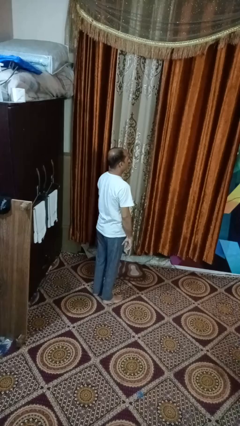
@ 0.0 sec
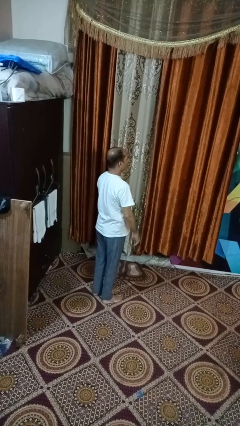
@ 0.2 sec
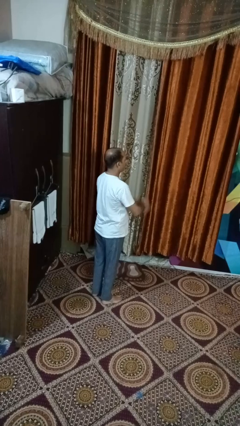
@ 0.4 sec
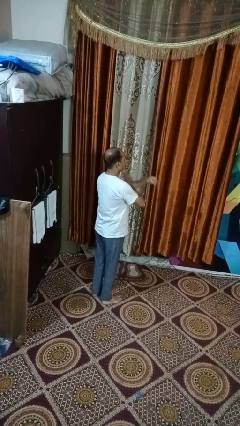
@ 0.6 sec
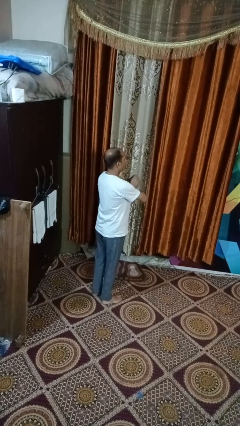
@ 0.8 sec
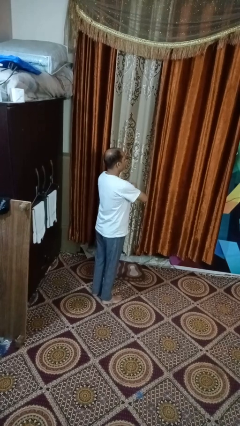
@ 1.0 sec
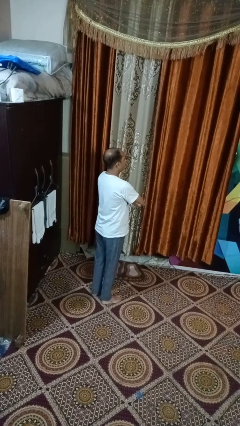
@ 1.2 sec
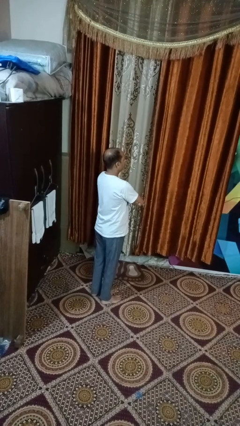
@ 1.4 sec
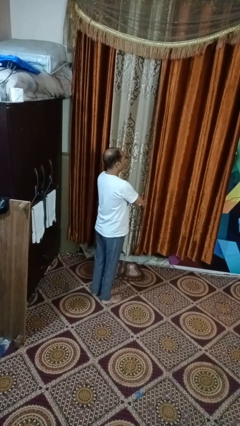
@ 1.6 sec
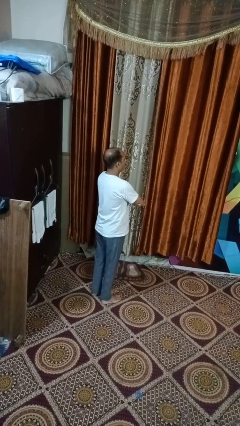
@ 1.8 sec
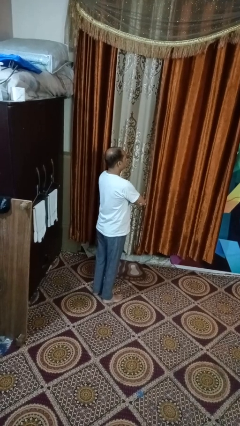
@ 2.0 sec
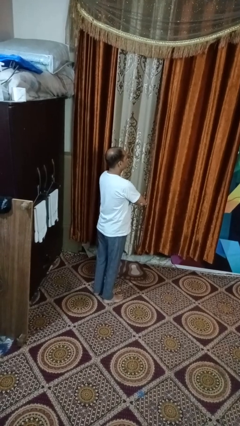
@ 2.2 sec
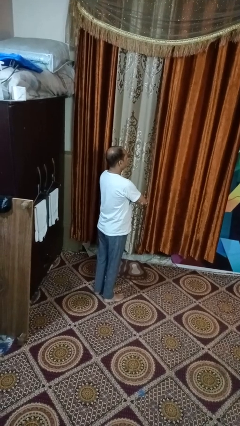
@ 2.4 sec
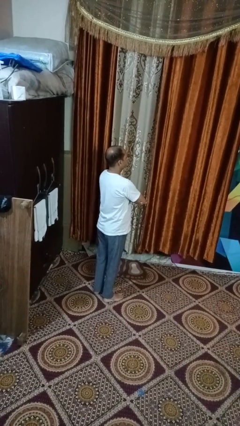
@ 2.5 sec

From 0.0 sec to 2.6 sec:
person crosses arms

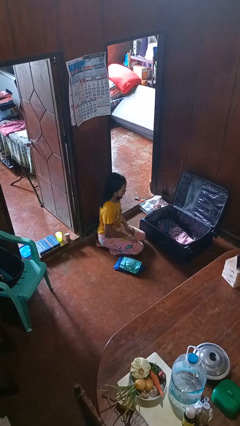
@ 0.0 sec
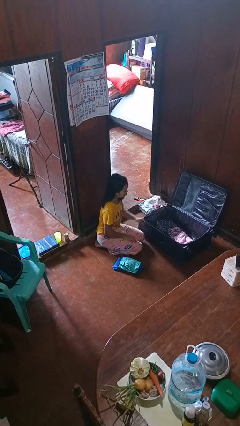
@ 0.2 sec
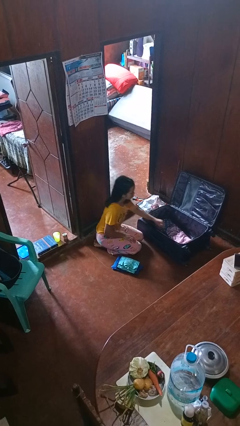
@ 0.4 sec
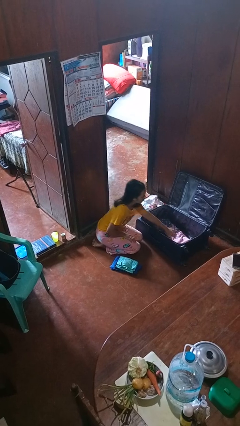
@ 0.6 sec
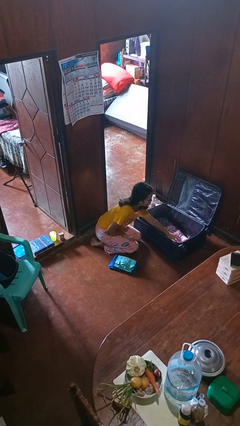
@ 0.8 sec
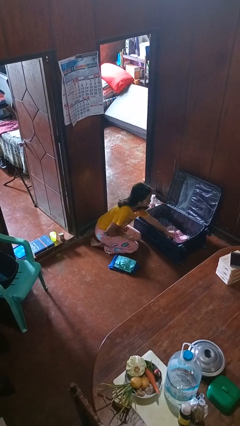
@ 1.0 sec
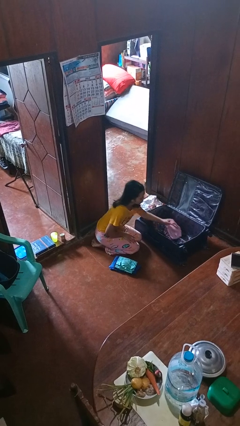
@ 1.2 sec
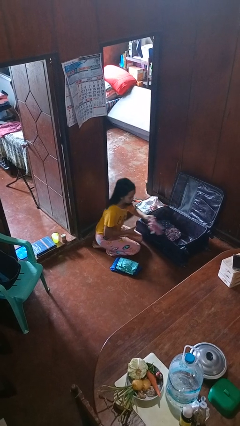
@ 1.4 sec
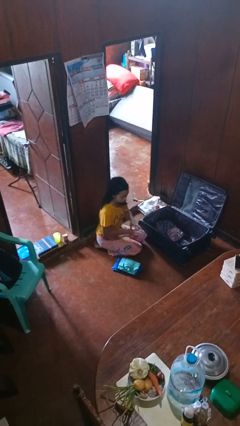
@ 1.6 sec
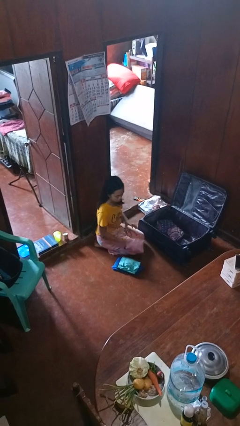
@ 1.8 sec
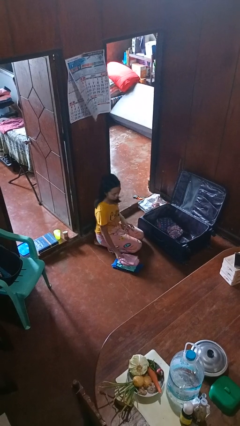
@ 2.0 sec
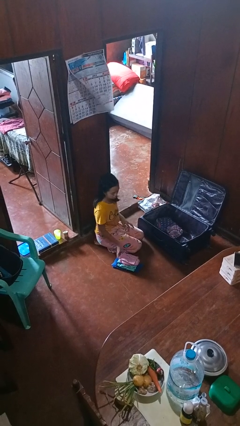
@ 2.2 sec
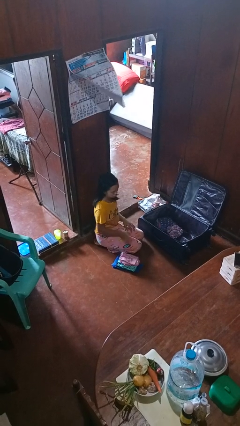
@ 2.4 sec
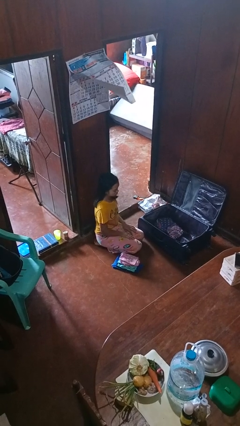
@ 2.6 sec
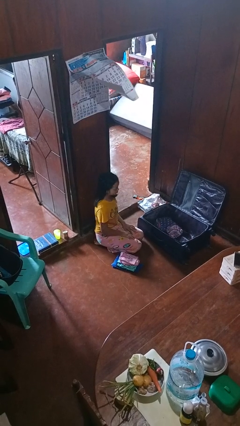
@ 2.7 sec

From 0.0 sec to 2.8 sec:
person unloads clothes from suitcase

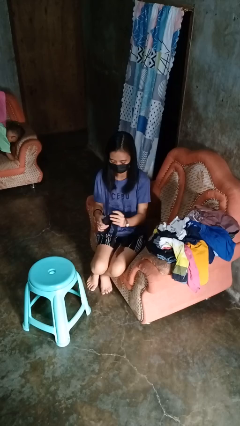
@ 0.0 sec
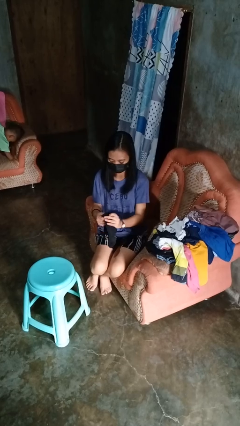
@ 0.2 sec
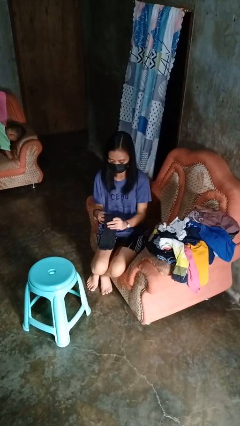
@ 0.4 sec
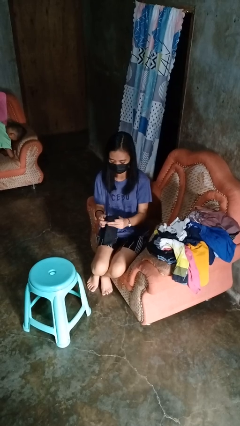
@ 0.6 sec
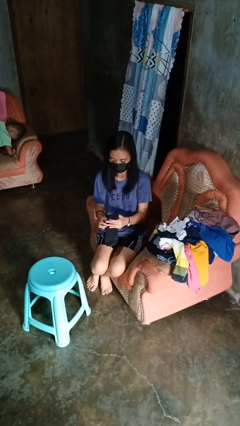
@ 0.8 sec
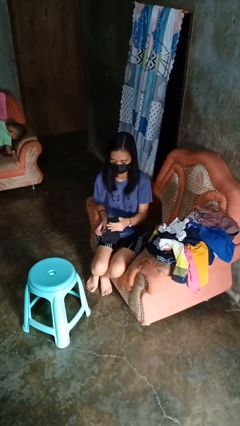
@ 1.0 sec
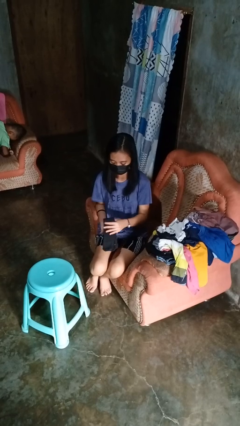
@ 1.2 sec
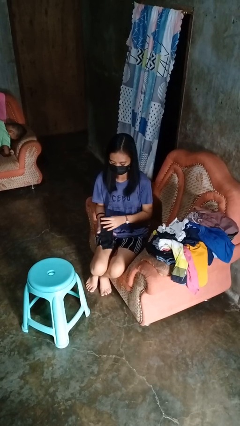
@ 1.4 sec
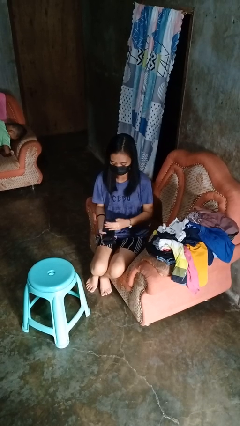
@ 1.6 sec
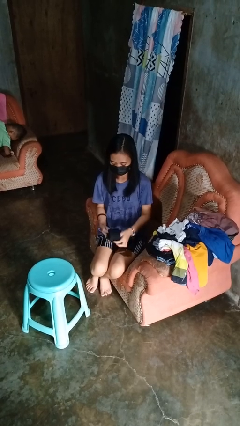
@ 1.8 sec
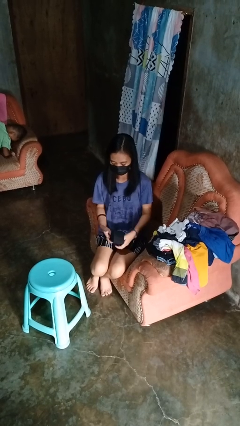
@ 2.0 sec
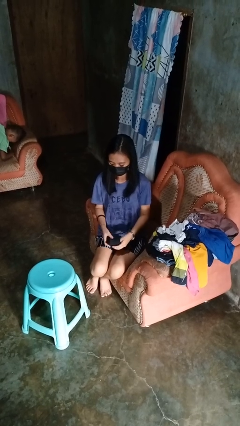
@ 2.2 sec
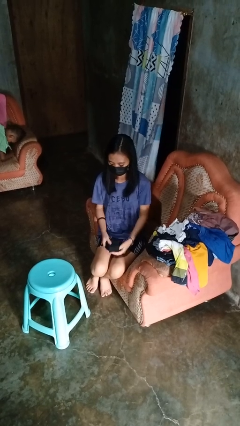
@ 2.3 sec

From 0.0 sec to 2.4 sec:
person folds socks

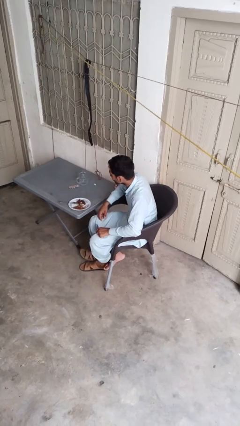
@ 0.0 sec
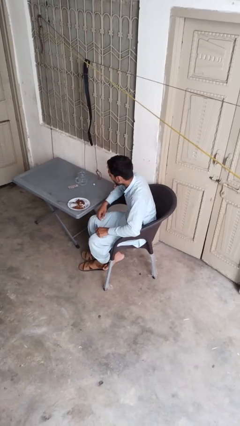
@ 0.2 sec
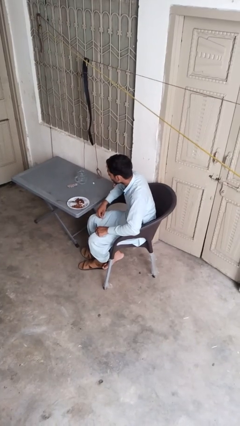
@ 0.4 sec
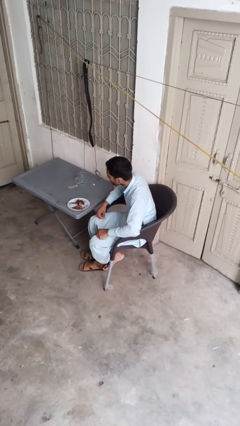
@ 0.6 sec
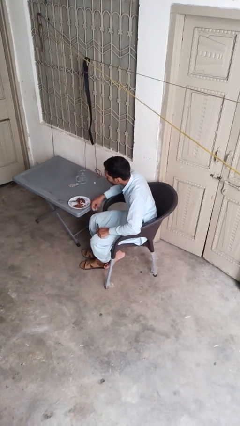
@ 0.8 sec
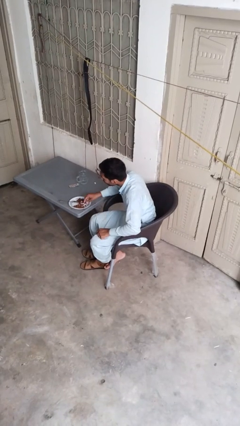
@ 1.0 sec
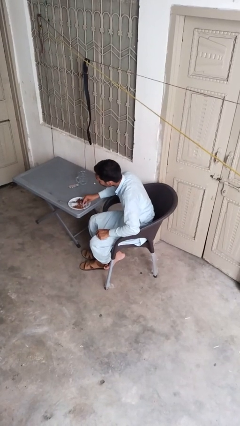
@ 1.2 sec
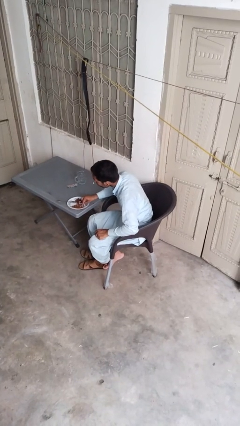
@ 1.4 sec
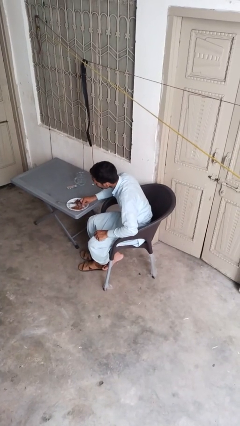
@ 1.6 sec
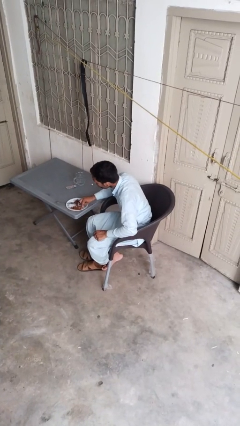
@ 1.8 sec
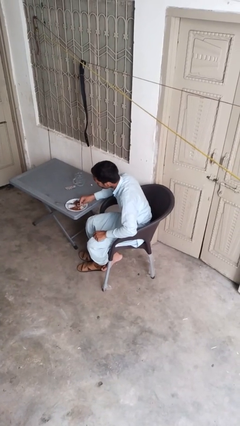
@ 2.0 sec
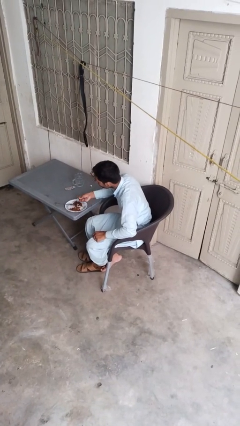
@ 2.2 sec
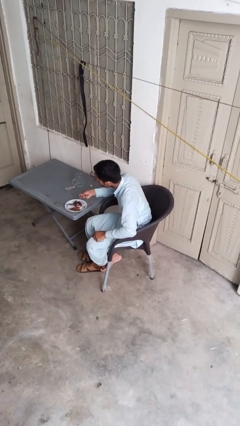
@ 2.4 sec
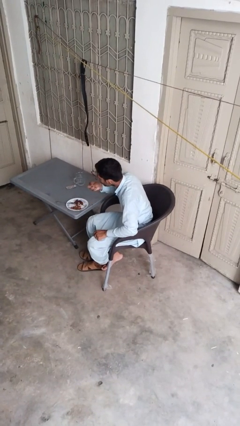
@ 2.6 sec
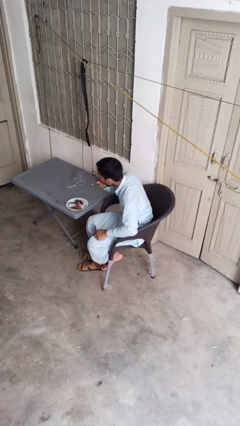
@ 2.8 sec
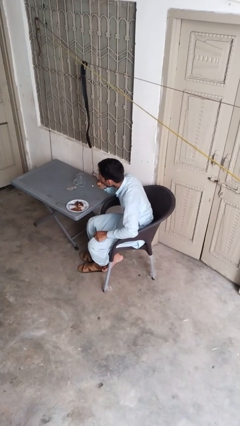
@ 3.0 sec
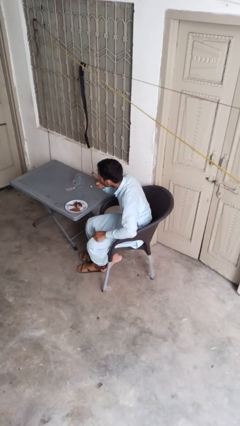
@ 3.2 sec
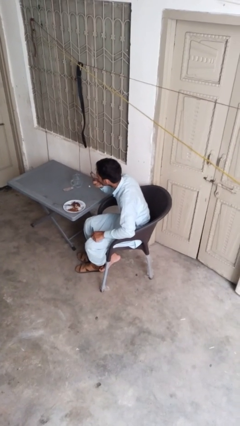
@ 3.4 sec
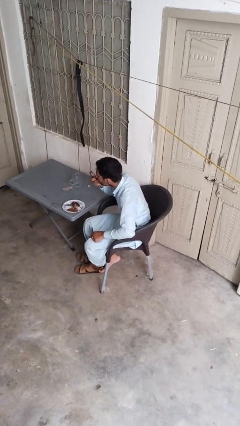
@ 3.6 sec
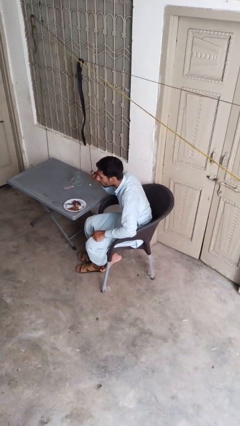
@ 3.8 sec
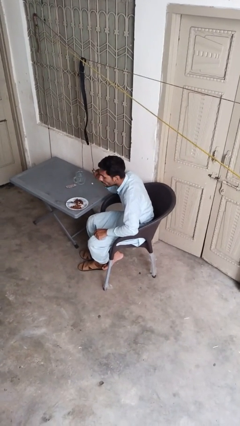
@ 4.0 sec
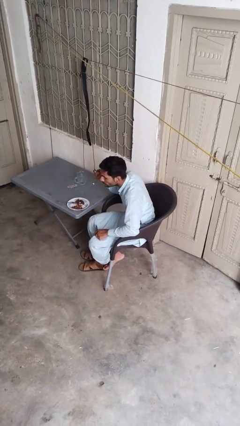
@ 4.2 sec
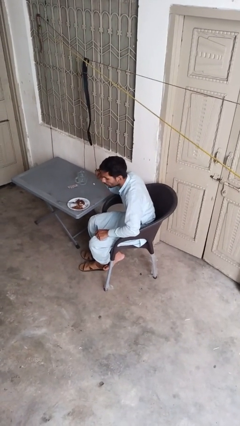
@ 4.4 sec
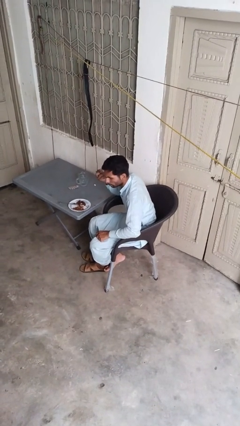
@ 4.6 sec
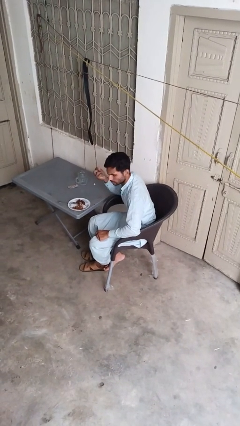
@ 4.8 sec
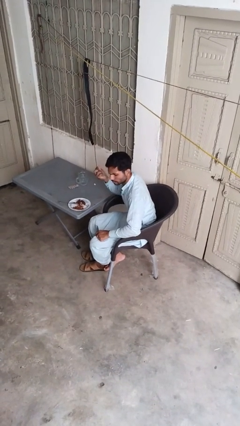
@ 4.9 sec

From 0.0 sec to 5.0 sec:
person eats with hands

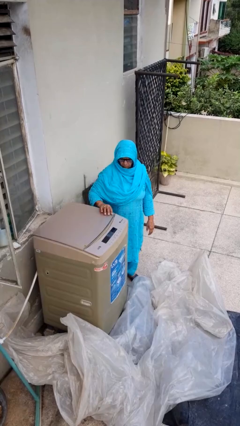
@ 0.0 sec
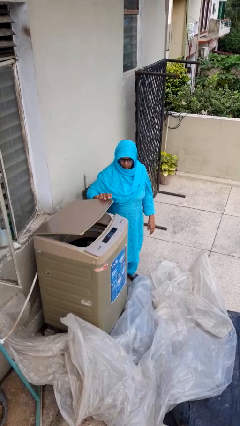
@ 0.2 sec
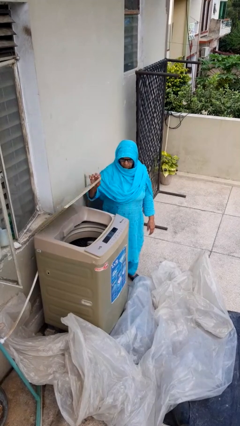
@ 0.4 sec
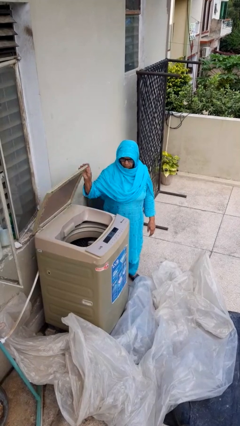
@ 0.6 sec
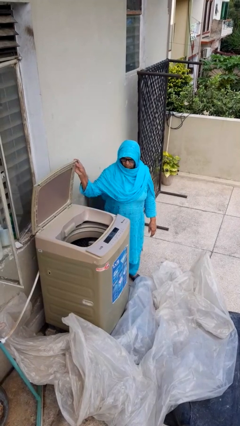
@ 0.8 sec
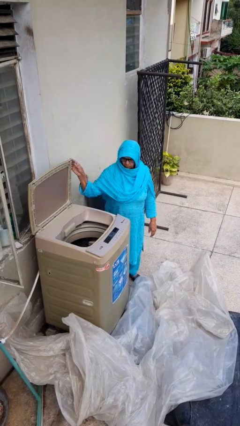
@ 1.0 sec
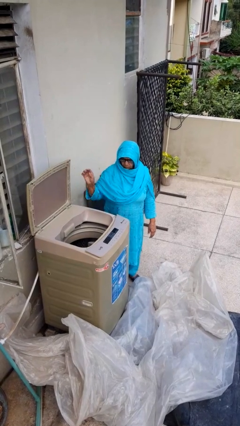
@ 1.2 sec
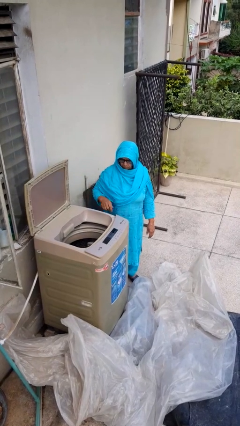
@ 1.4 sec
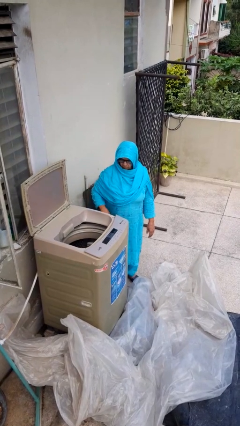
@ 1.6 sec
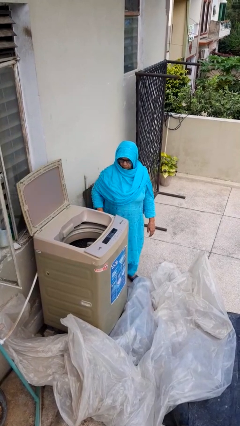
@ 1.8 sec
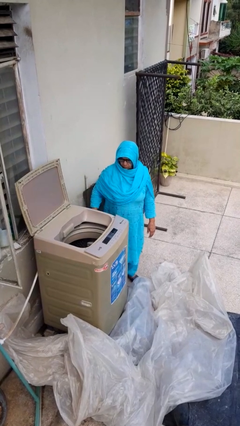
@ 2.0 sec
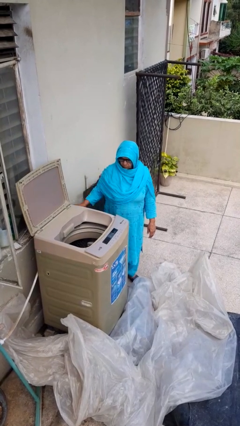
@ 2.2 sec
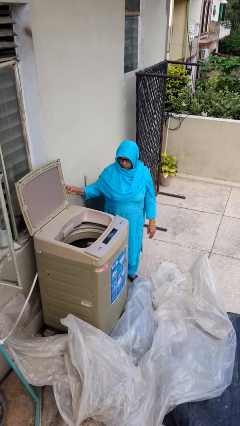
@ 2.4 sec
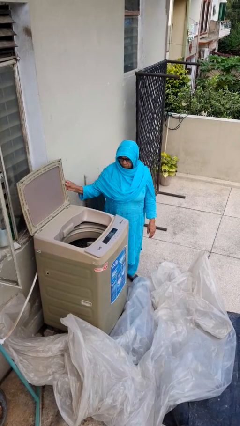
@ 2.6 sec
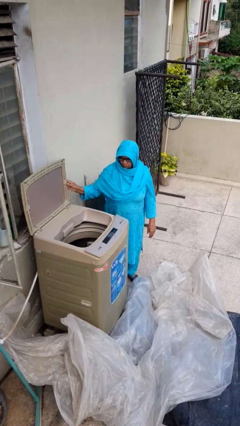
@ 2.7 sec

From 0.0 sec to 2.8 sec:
person opens clothes washer

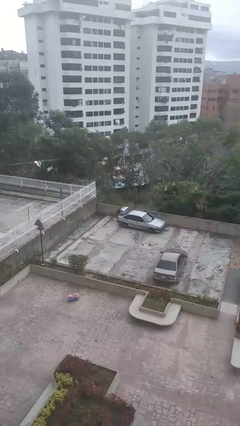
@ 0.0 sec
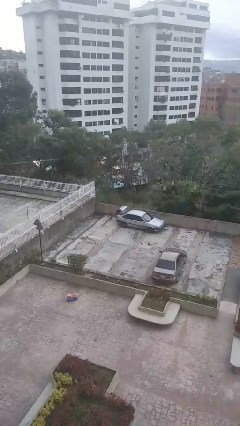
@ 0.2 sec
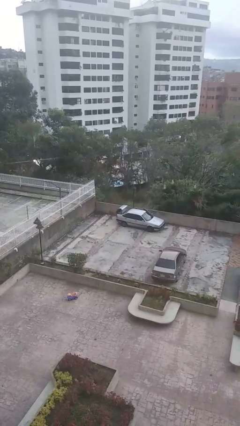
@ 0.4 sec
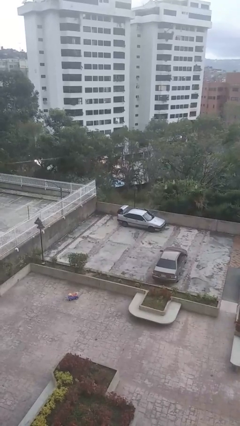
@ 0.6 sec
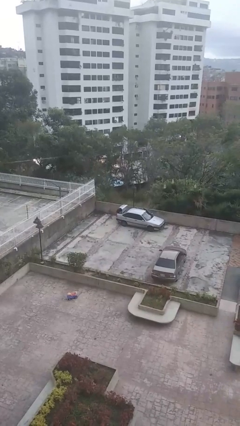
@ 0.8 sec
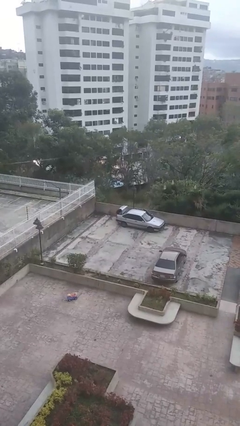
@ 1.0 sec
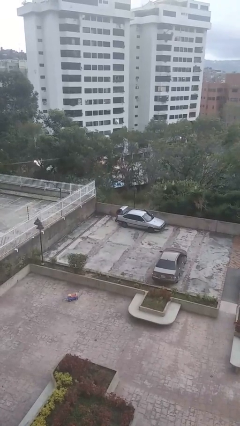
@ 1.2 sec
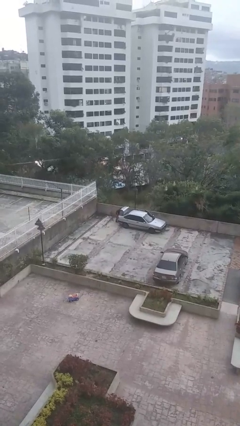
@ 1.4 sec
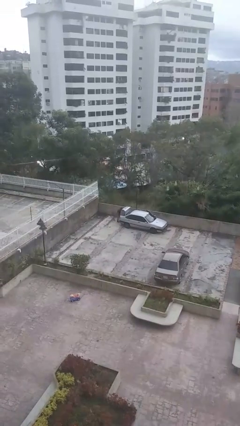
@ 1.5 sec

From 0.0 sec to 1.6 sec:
person loads car
